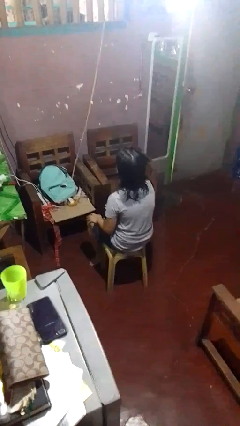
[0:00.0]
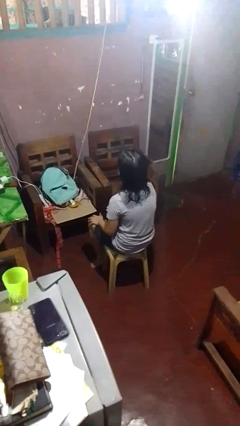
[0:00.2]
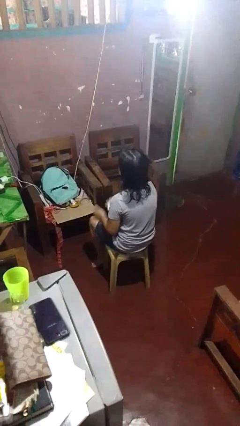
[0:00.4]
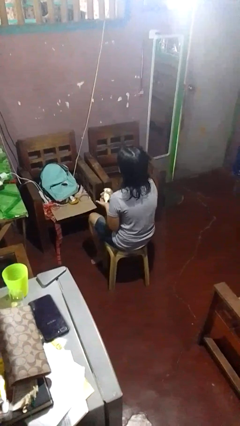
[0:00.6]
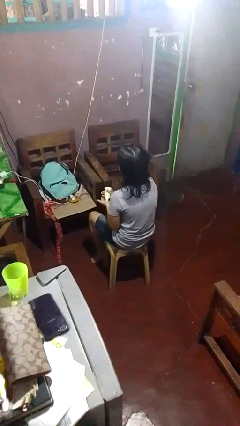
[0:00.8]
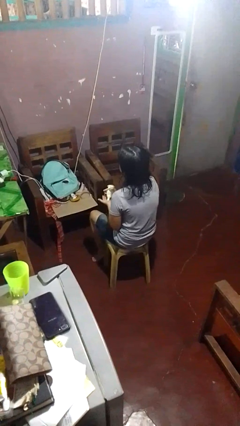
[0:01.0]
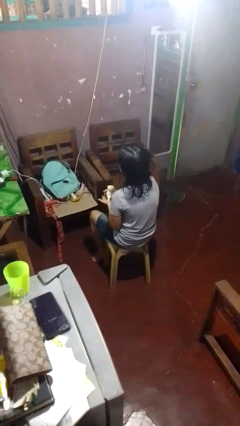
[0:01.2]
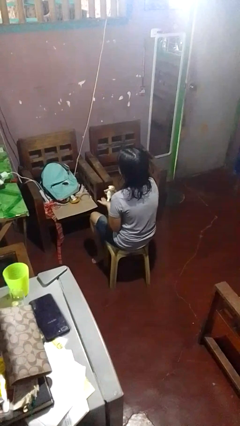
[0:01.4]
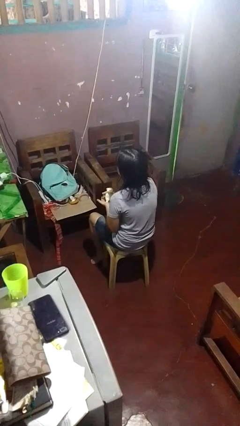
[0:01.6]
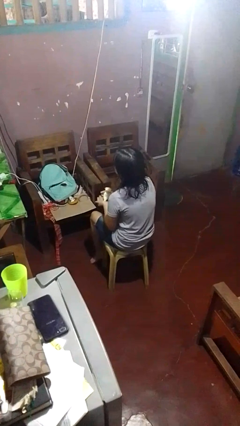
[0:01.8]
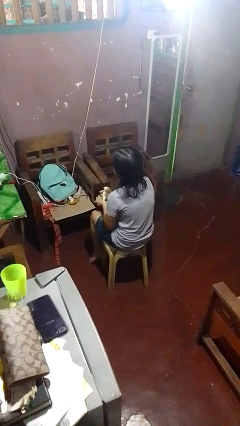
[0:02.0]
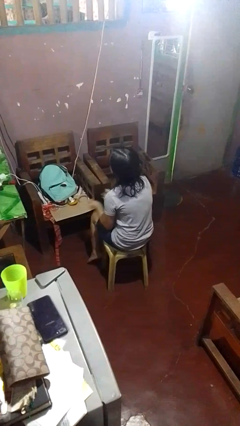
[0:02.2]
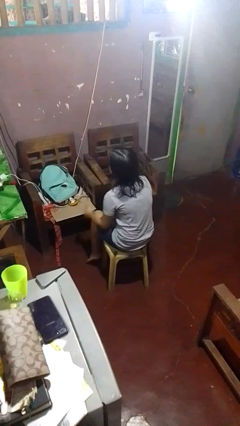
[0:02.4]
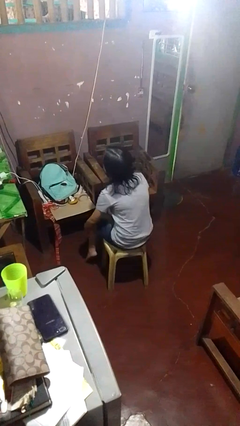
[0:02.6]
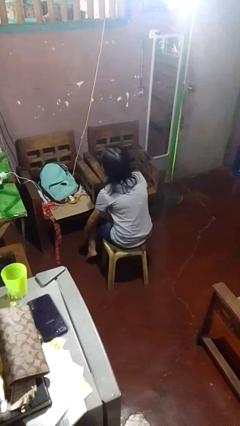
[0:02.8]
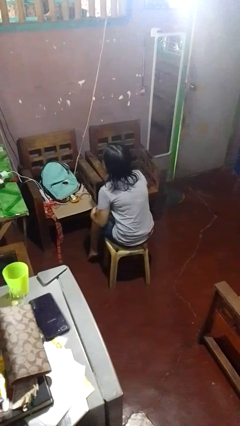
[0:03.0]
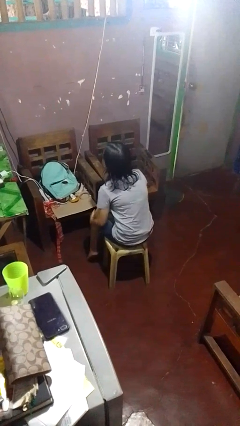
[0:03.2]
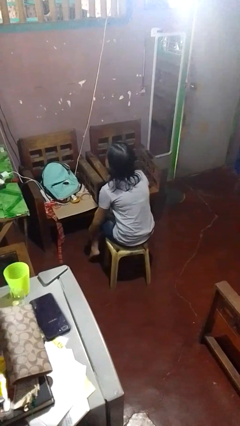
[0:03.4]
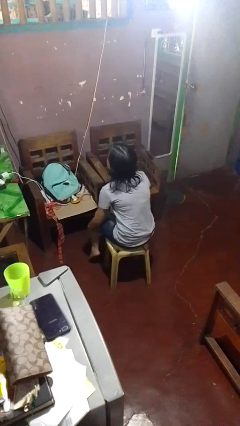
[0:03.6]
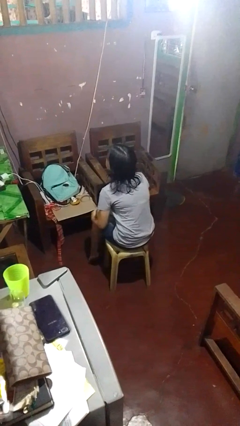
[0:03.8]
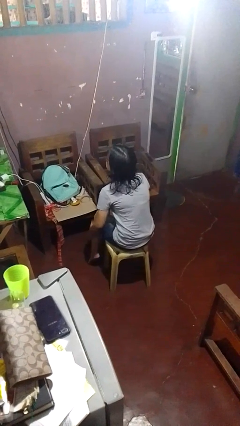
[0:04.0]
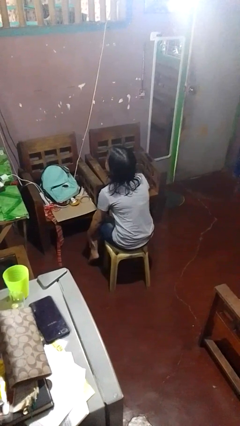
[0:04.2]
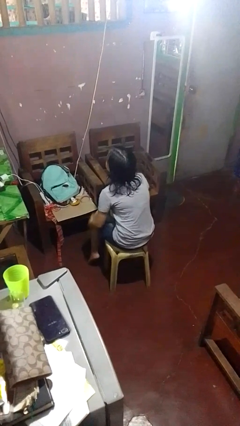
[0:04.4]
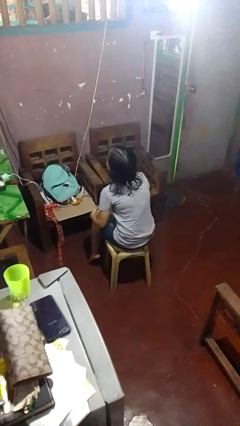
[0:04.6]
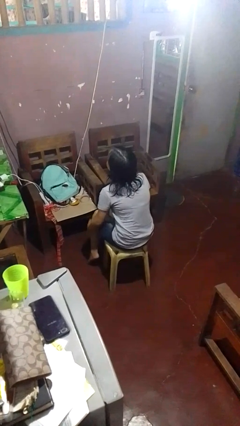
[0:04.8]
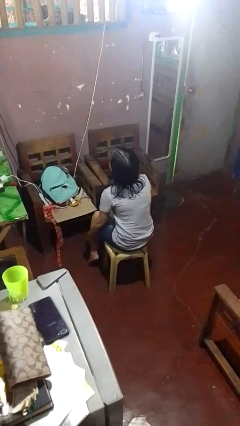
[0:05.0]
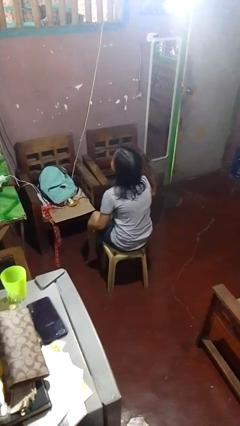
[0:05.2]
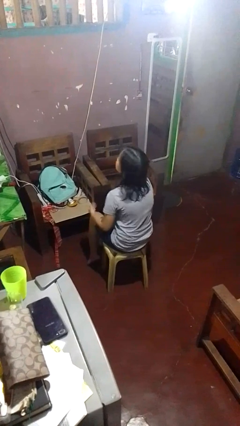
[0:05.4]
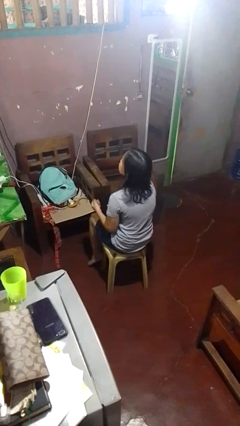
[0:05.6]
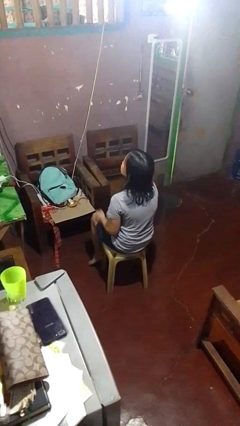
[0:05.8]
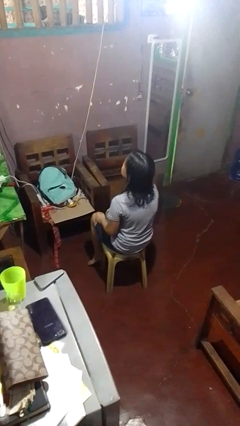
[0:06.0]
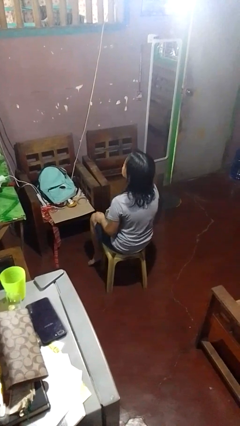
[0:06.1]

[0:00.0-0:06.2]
person applies sunscreen

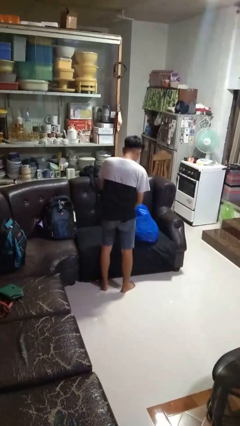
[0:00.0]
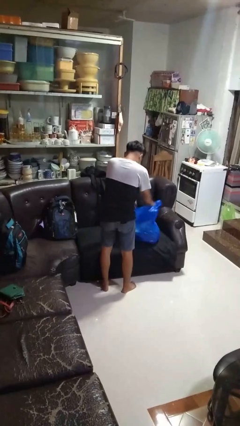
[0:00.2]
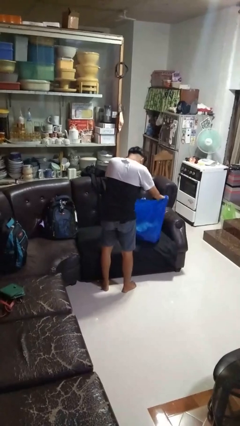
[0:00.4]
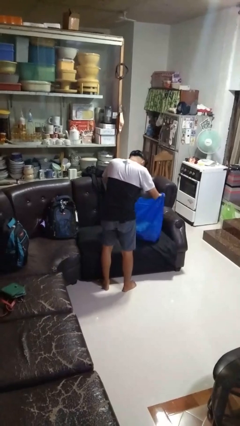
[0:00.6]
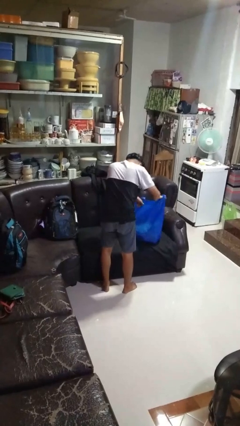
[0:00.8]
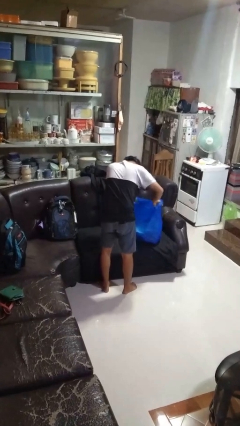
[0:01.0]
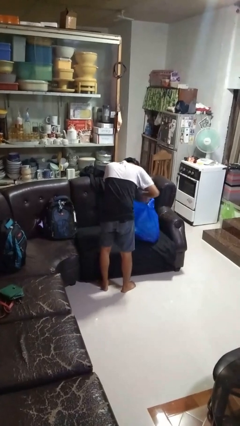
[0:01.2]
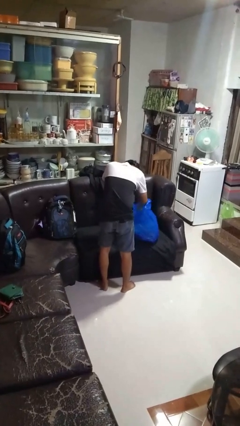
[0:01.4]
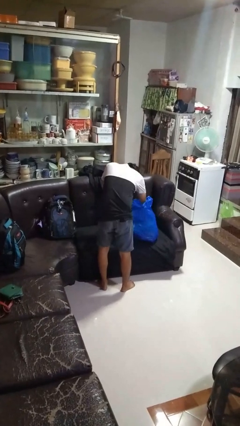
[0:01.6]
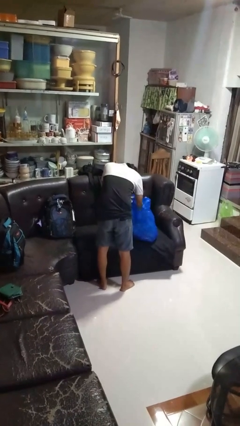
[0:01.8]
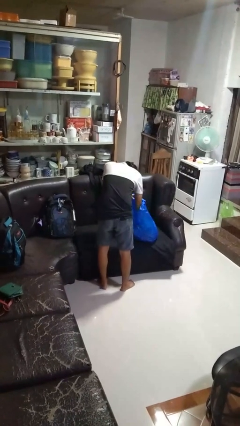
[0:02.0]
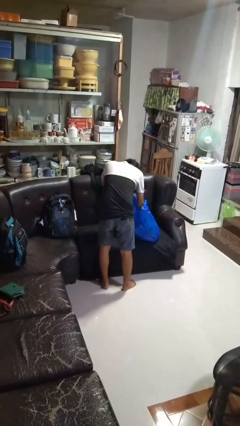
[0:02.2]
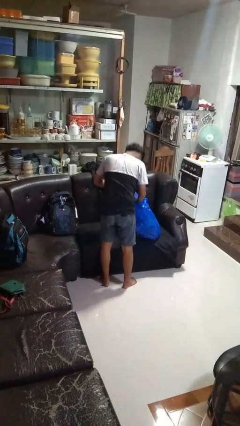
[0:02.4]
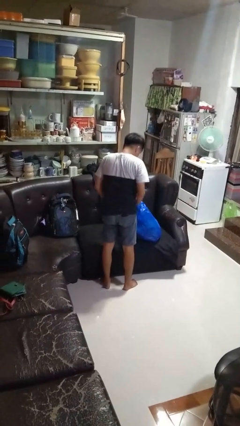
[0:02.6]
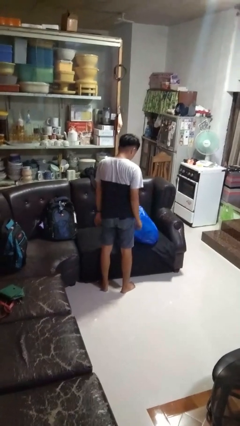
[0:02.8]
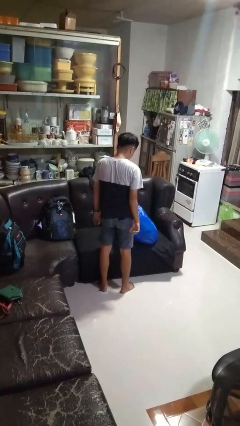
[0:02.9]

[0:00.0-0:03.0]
person searches in bag

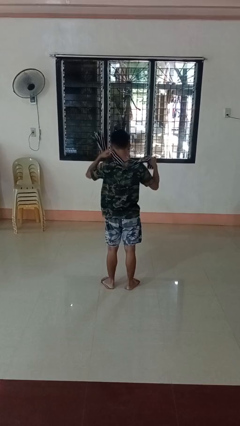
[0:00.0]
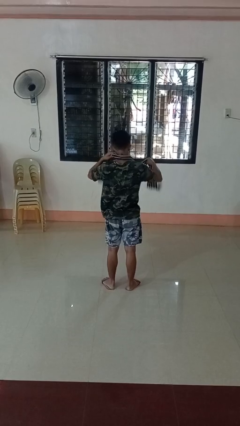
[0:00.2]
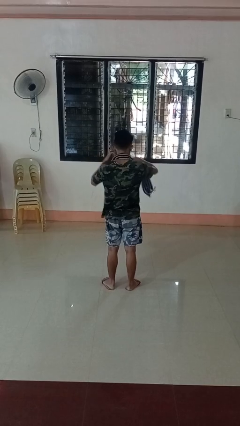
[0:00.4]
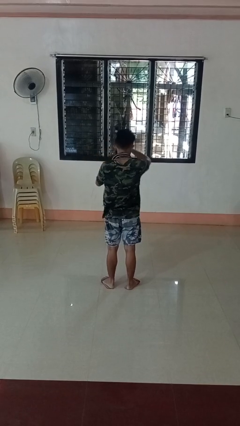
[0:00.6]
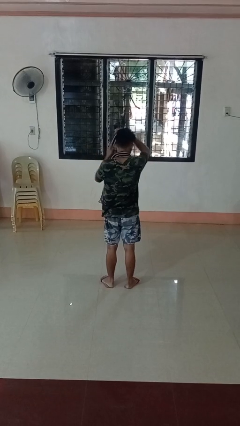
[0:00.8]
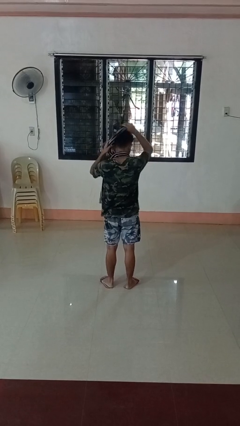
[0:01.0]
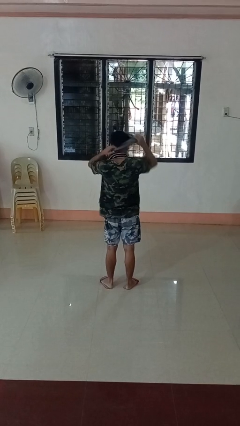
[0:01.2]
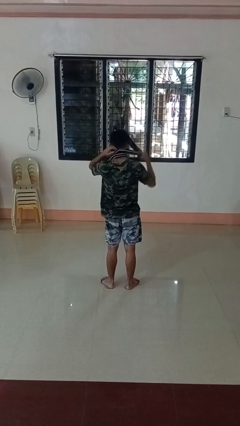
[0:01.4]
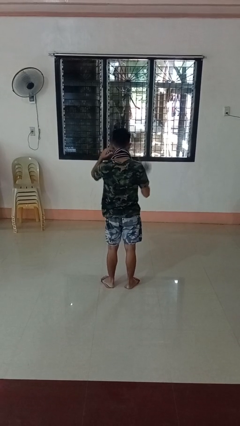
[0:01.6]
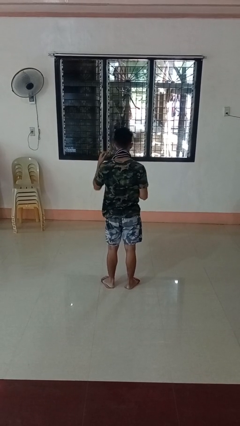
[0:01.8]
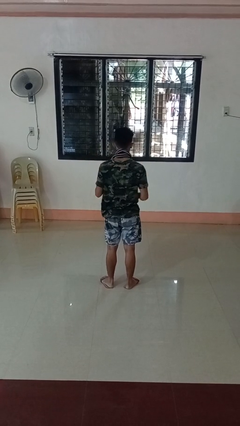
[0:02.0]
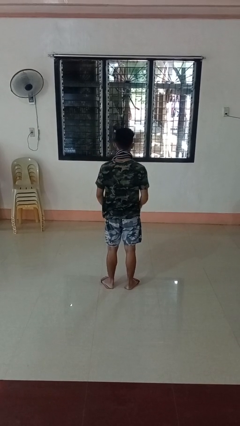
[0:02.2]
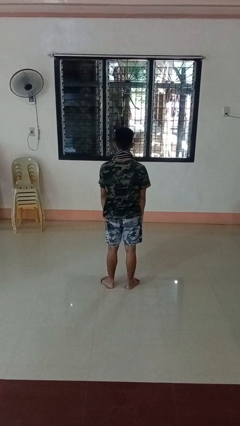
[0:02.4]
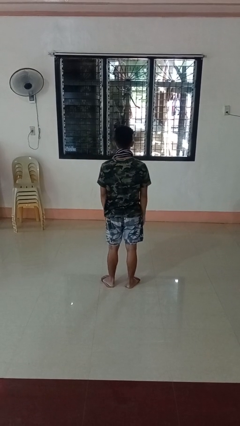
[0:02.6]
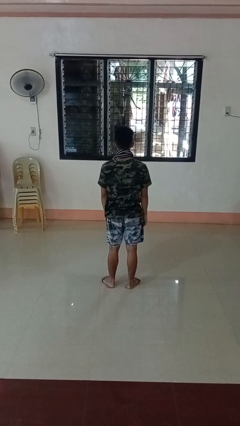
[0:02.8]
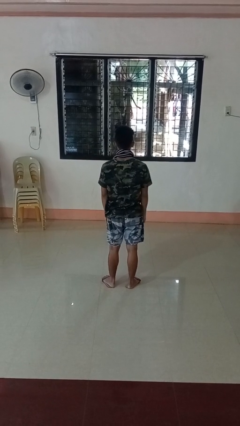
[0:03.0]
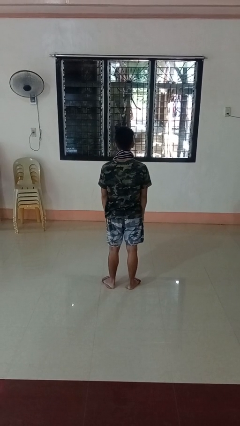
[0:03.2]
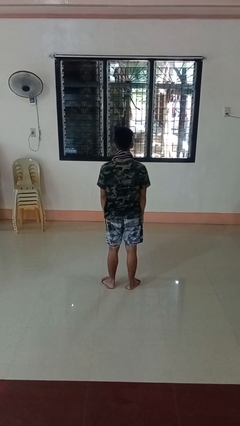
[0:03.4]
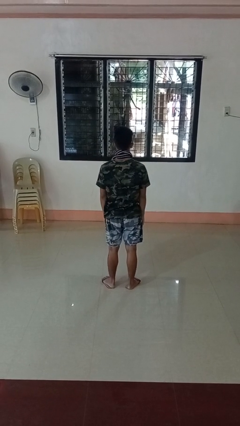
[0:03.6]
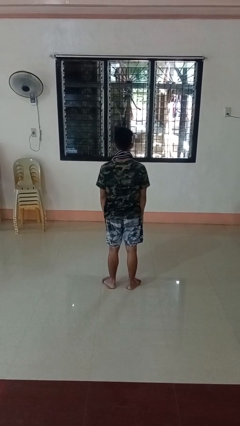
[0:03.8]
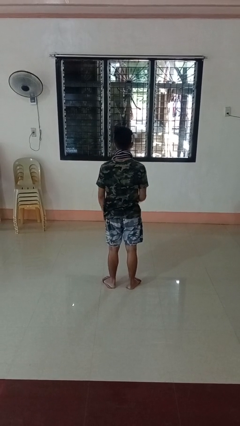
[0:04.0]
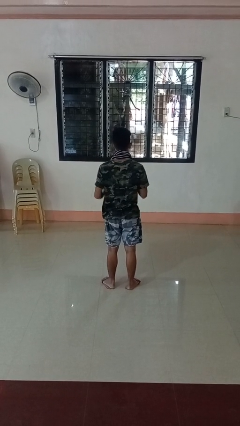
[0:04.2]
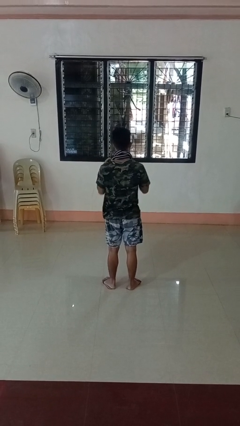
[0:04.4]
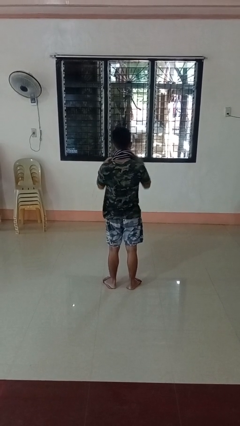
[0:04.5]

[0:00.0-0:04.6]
person puts on scarf

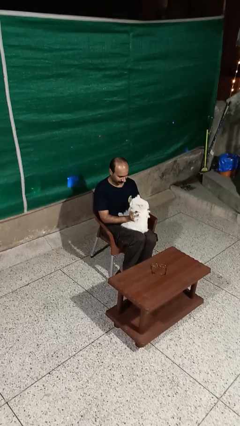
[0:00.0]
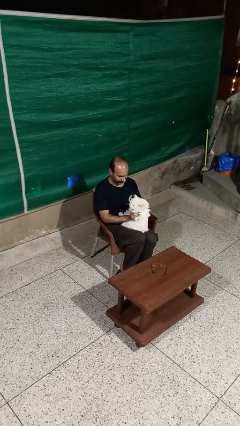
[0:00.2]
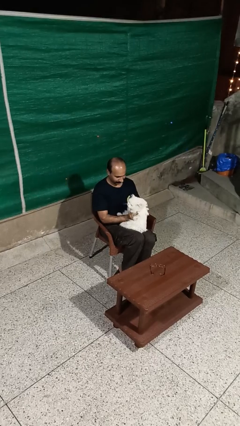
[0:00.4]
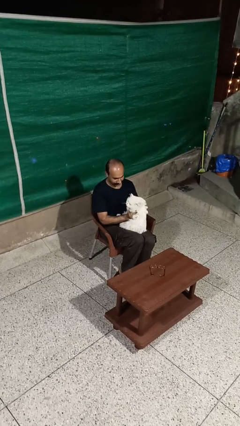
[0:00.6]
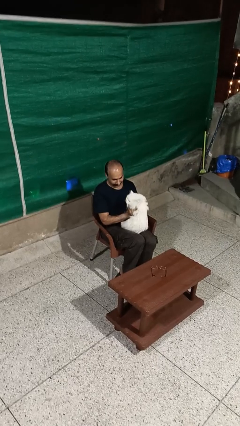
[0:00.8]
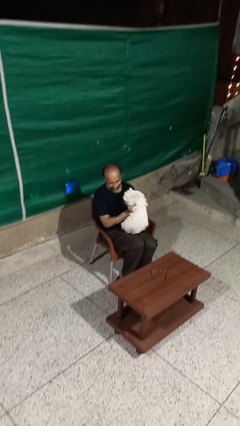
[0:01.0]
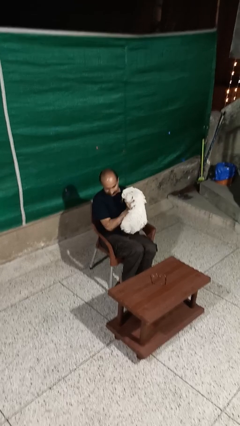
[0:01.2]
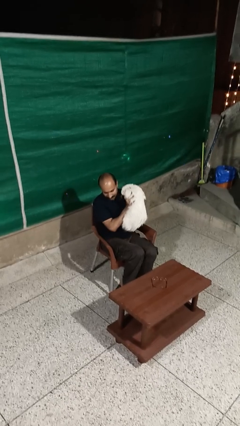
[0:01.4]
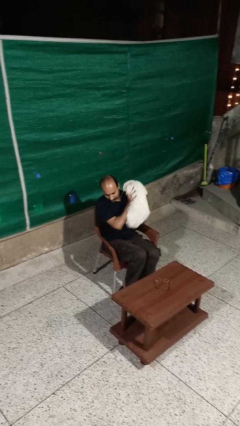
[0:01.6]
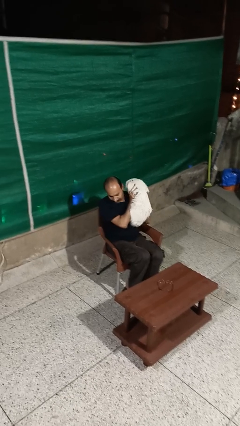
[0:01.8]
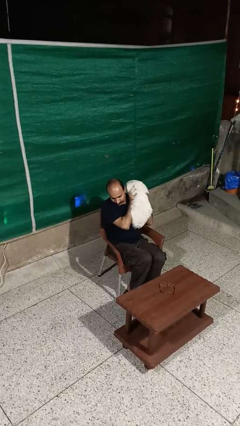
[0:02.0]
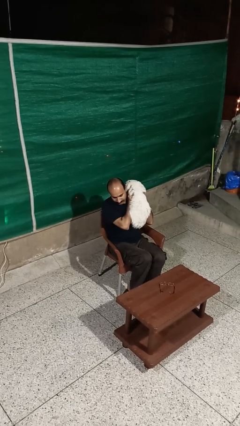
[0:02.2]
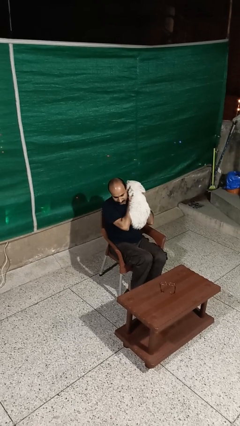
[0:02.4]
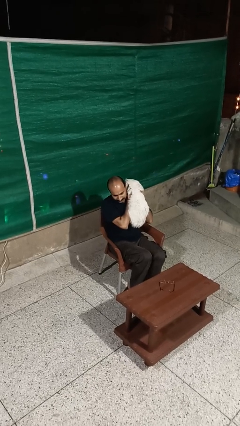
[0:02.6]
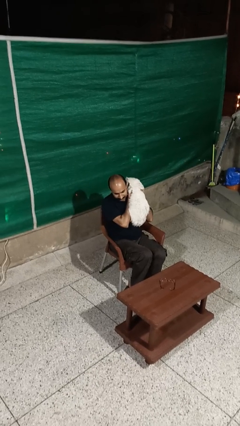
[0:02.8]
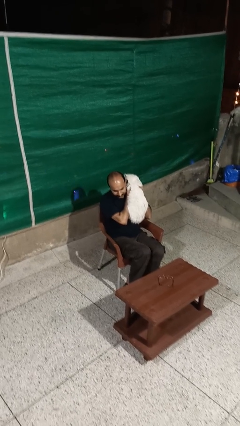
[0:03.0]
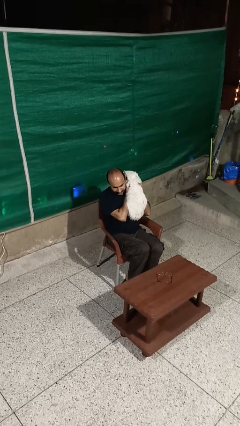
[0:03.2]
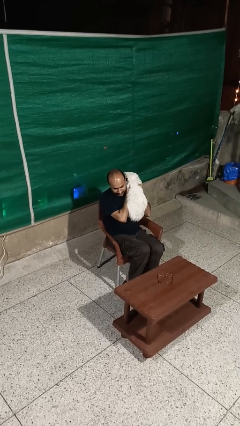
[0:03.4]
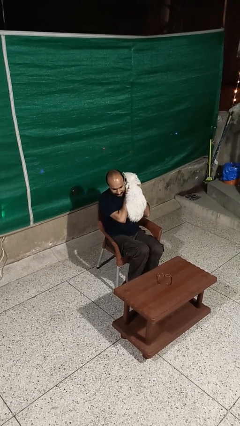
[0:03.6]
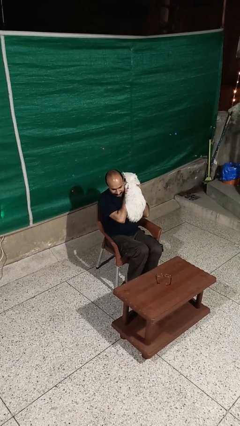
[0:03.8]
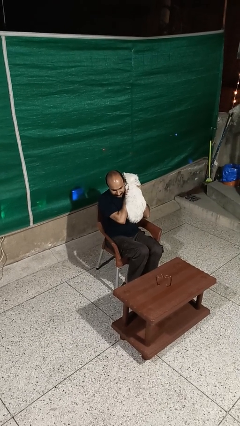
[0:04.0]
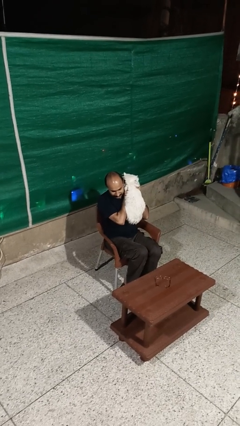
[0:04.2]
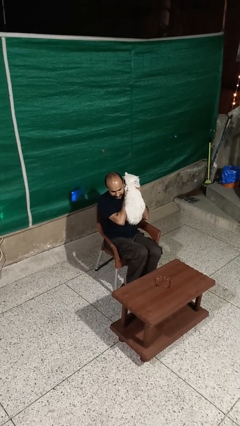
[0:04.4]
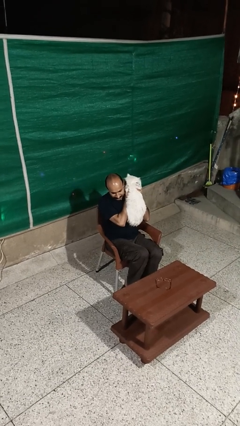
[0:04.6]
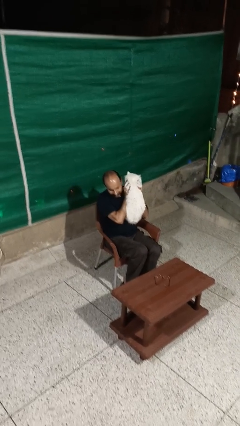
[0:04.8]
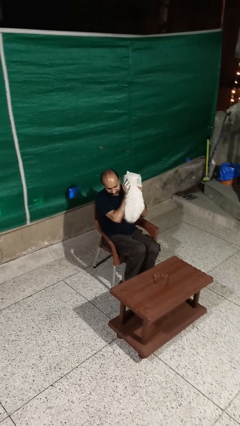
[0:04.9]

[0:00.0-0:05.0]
person hugs dog
